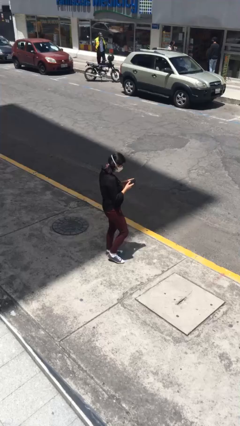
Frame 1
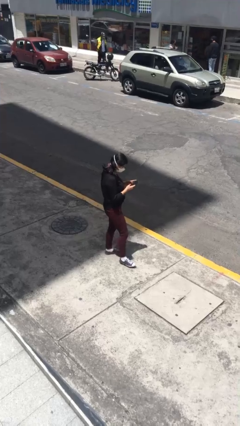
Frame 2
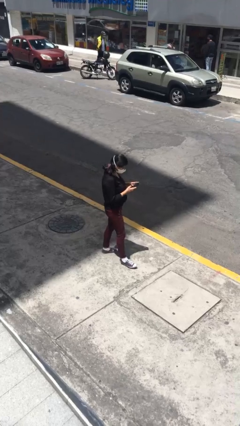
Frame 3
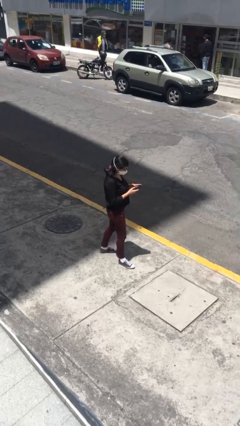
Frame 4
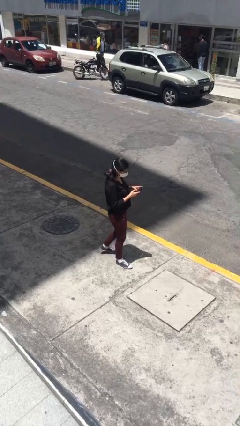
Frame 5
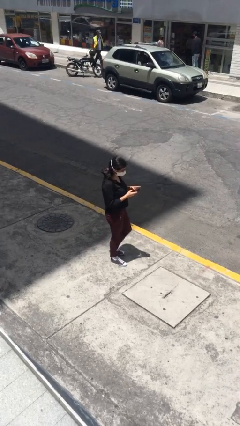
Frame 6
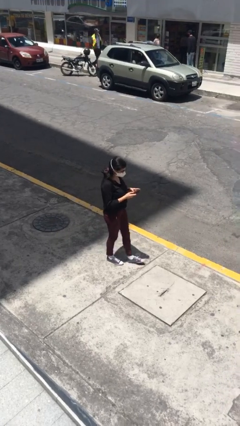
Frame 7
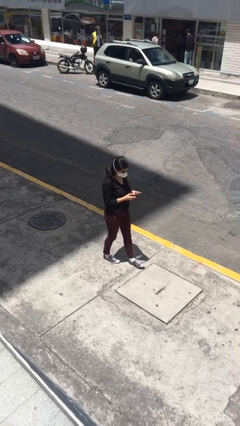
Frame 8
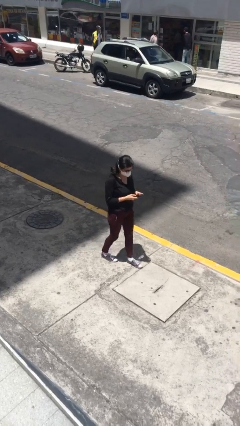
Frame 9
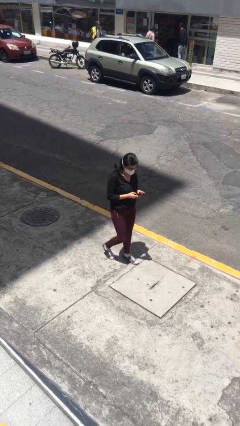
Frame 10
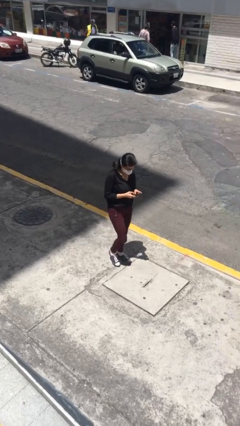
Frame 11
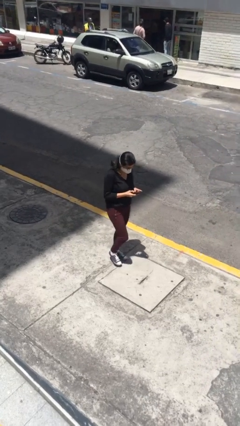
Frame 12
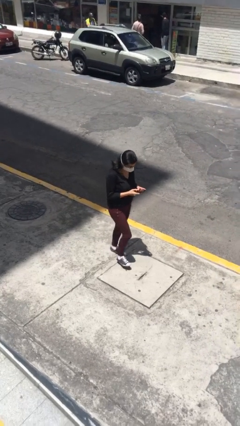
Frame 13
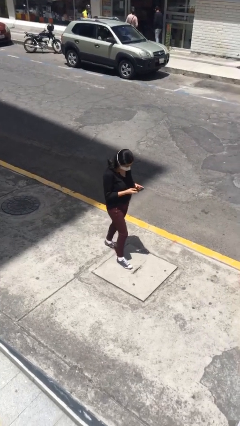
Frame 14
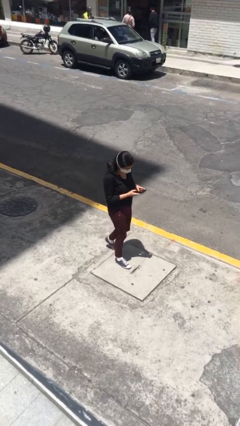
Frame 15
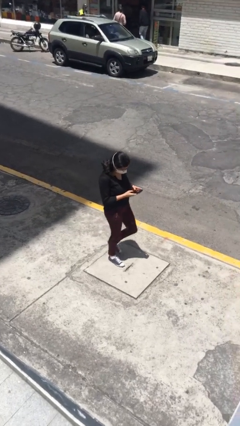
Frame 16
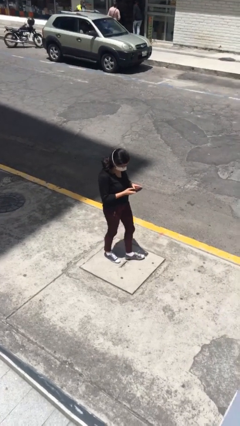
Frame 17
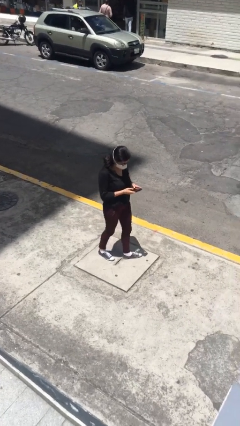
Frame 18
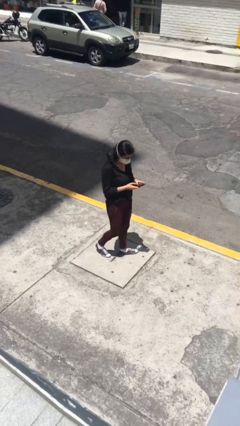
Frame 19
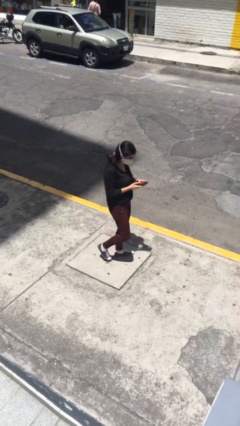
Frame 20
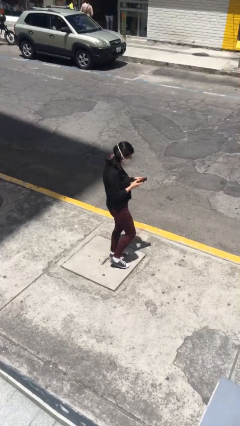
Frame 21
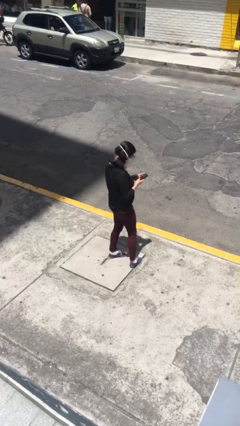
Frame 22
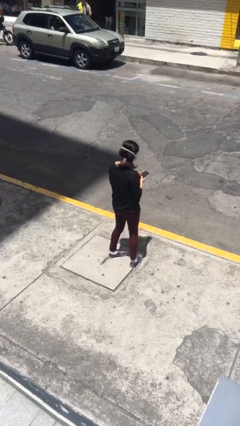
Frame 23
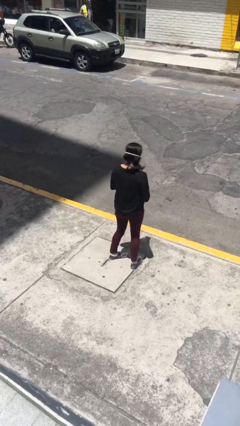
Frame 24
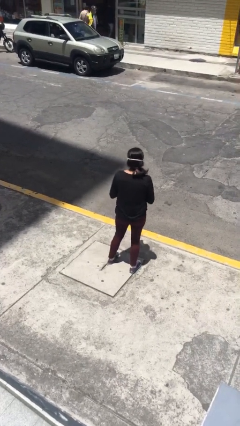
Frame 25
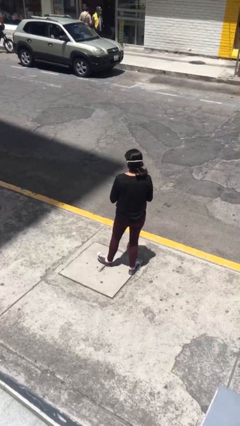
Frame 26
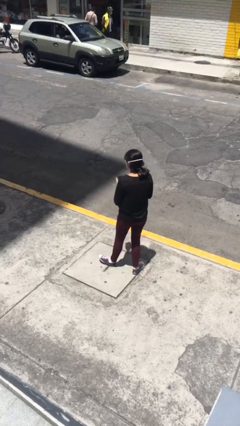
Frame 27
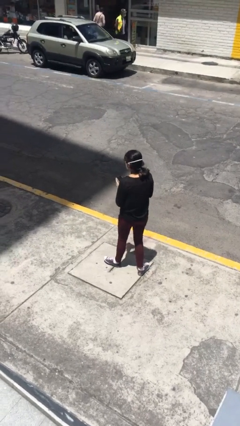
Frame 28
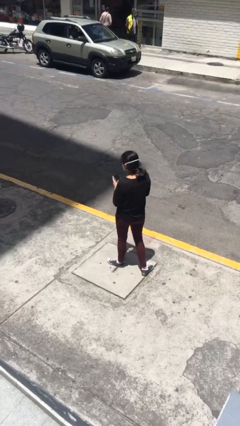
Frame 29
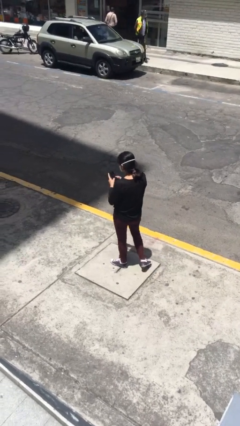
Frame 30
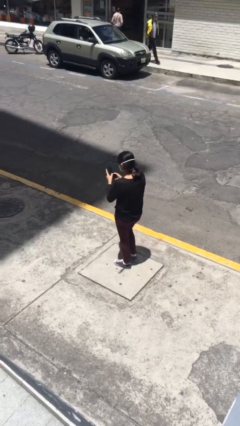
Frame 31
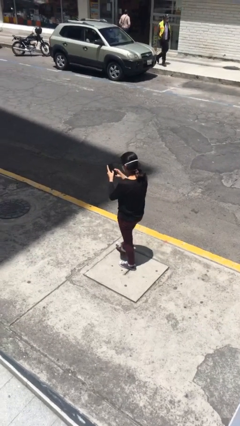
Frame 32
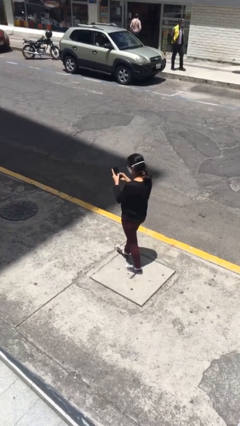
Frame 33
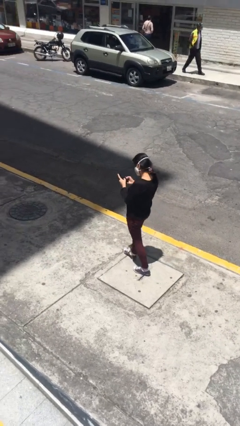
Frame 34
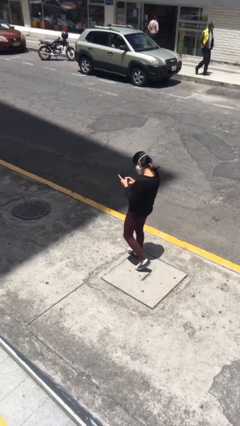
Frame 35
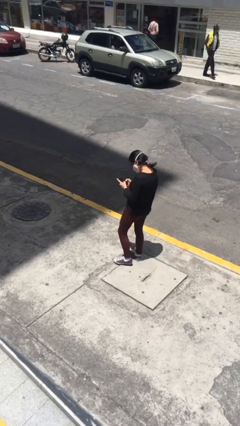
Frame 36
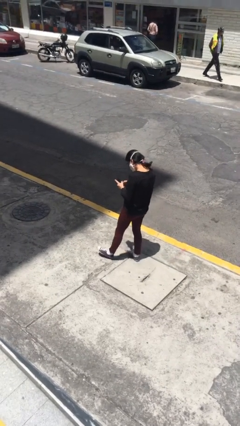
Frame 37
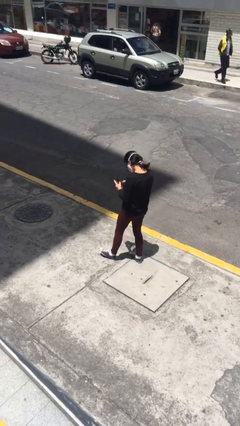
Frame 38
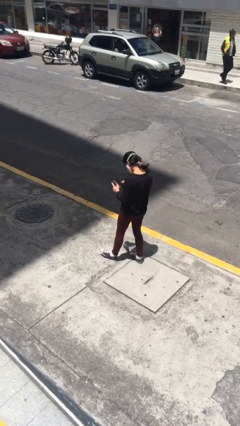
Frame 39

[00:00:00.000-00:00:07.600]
person texts on phone

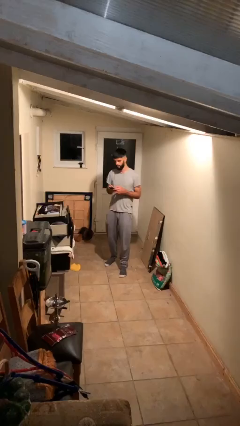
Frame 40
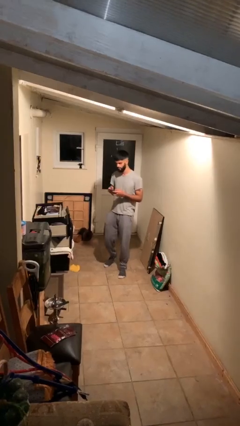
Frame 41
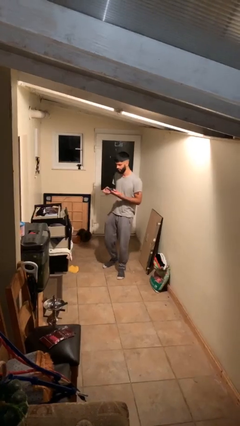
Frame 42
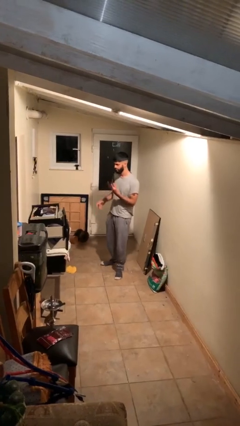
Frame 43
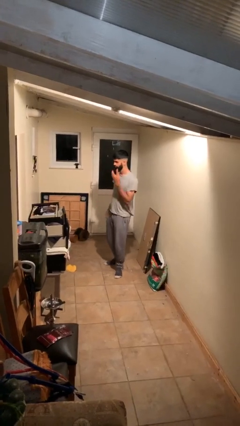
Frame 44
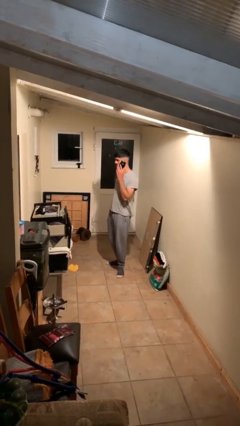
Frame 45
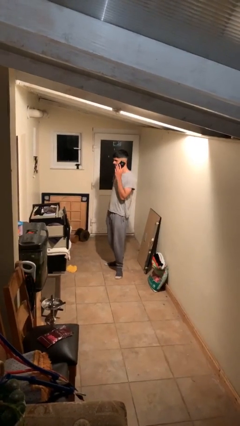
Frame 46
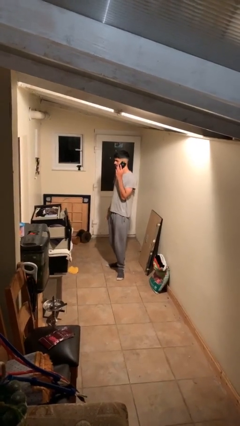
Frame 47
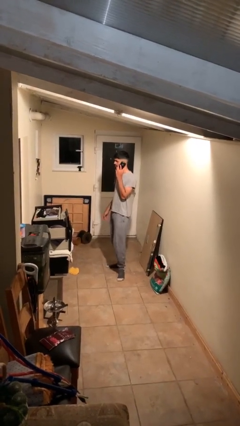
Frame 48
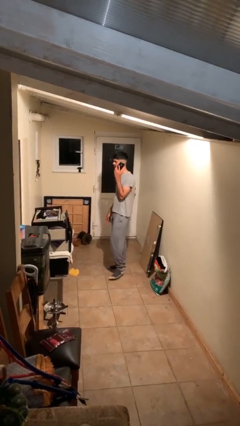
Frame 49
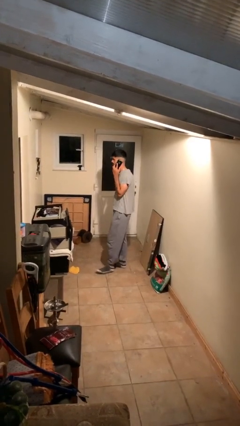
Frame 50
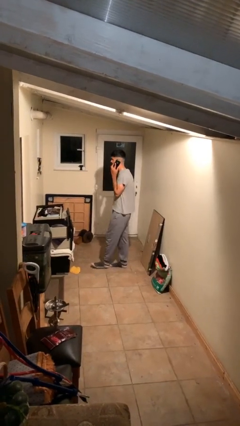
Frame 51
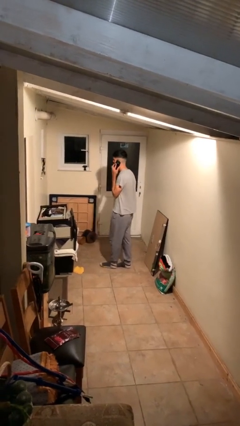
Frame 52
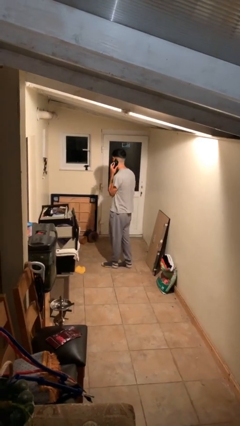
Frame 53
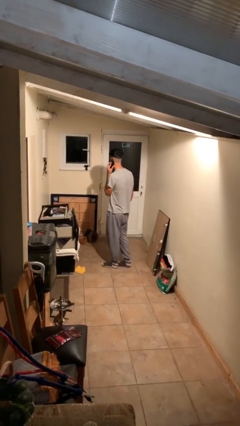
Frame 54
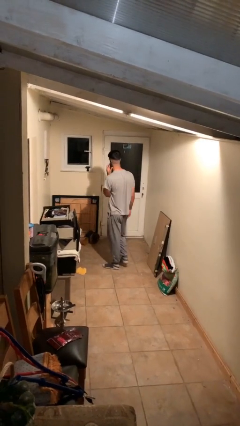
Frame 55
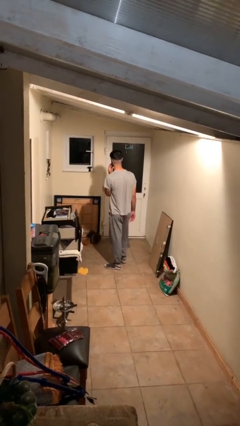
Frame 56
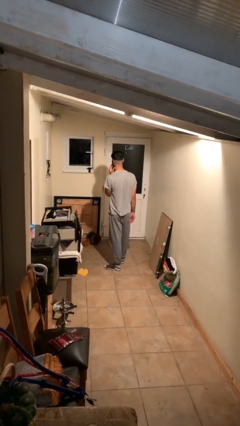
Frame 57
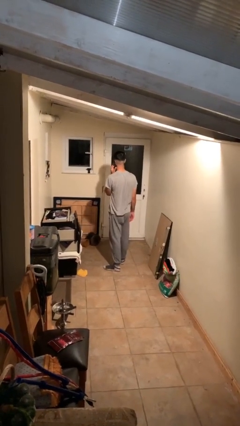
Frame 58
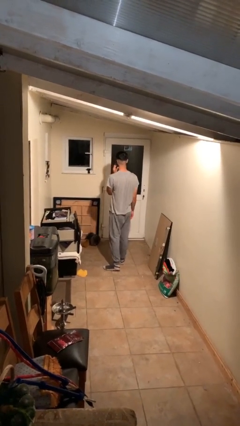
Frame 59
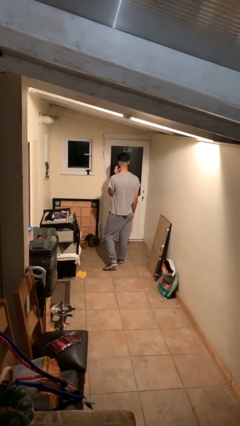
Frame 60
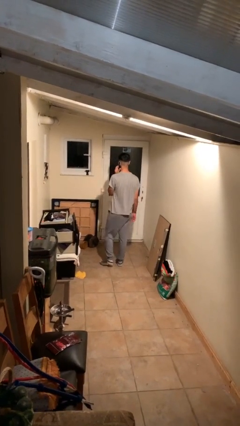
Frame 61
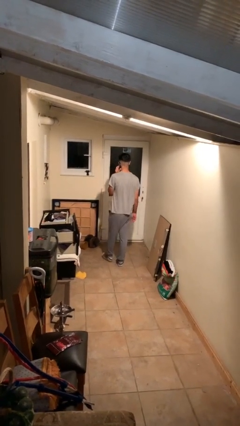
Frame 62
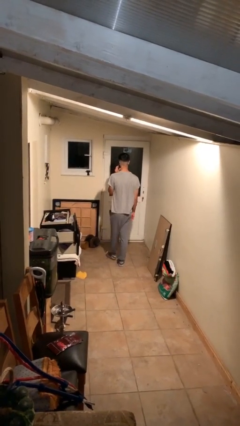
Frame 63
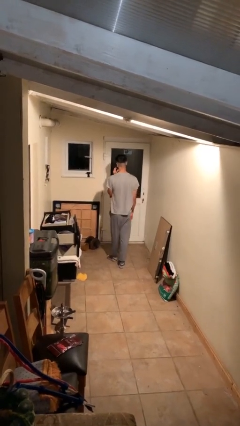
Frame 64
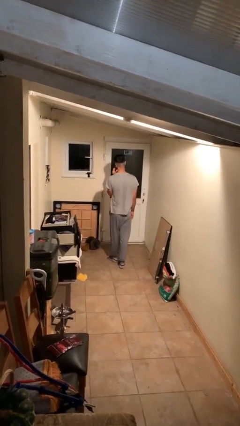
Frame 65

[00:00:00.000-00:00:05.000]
person talks on phone

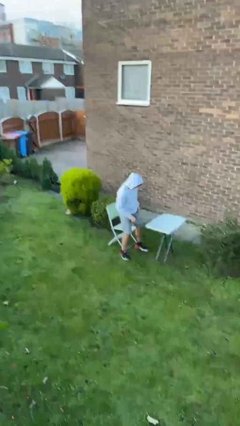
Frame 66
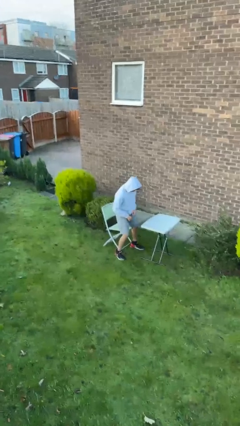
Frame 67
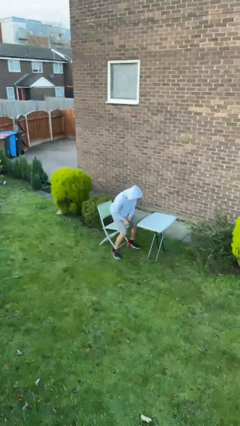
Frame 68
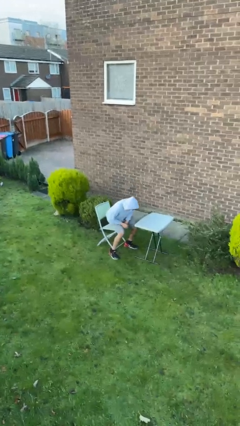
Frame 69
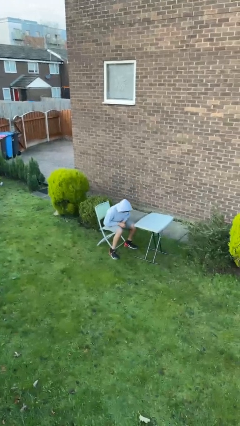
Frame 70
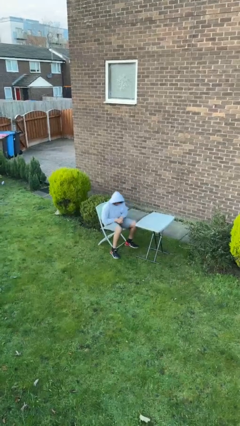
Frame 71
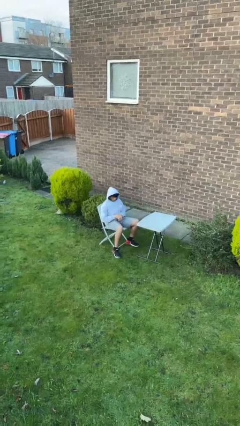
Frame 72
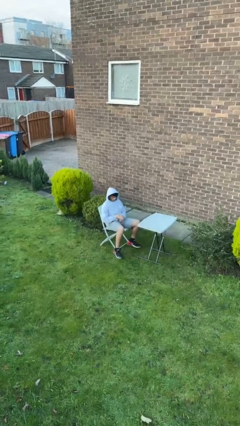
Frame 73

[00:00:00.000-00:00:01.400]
person sits down

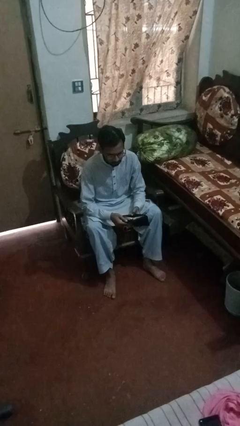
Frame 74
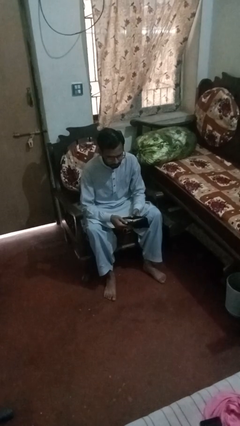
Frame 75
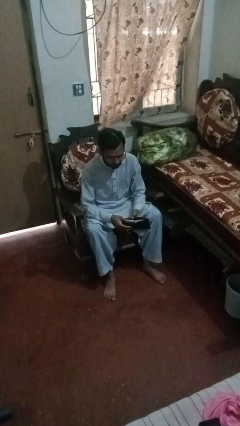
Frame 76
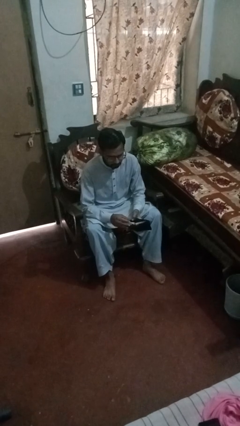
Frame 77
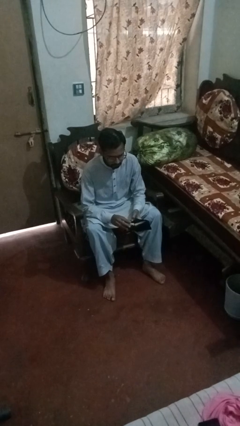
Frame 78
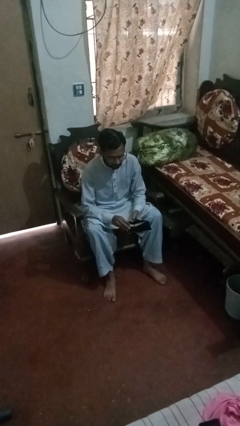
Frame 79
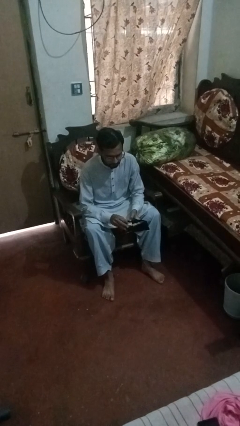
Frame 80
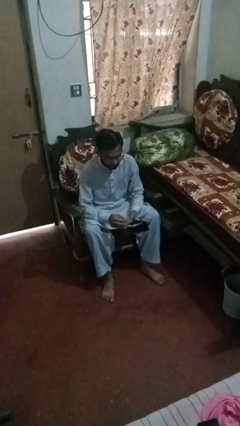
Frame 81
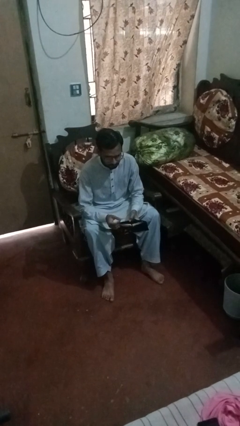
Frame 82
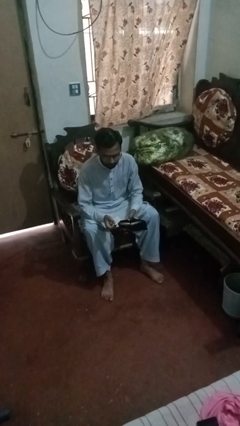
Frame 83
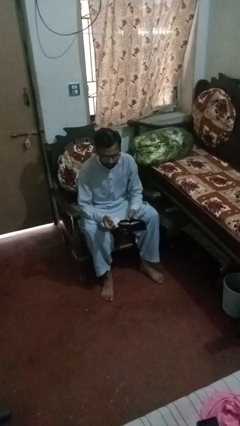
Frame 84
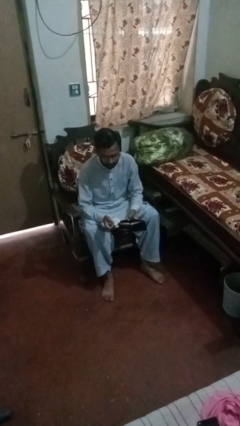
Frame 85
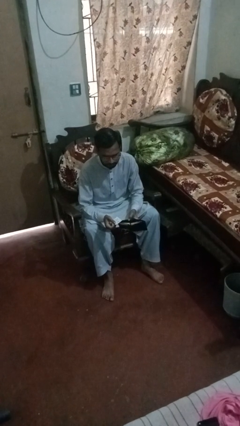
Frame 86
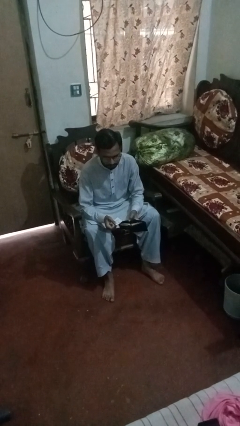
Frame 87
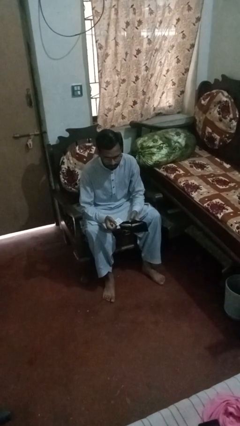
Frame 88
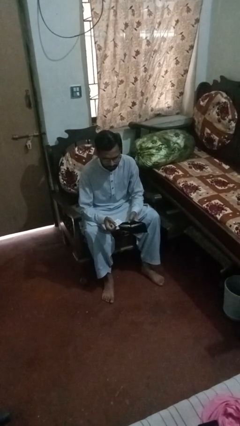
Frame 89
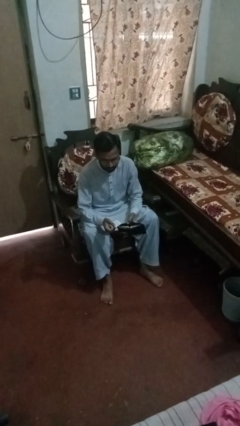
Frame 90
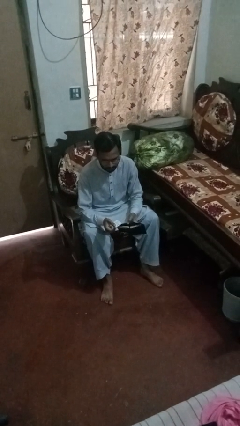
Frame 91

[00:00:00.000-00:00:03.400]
person takes object from purse

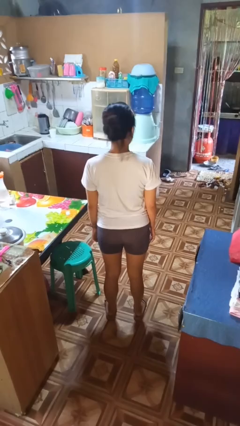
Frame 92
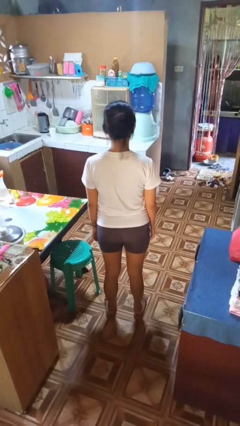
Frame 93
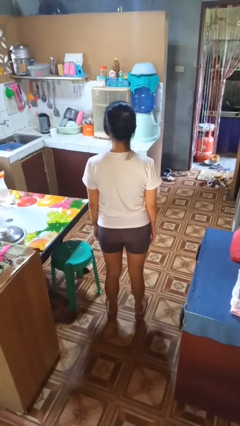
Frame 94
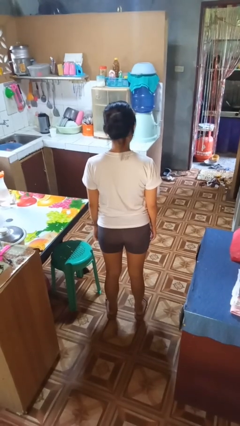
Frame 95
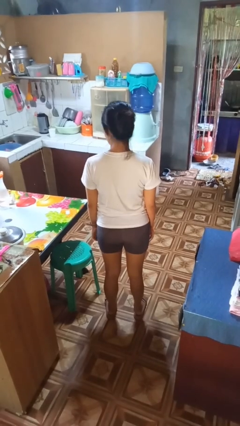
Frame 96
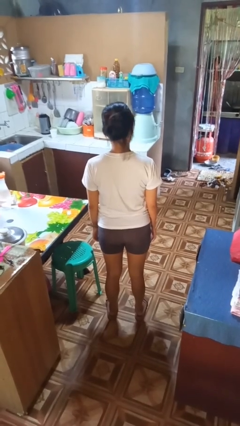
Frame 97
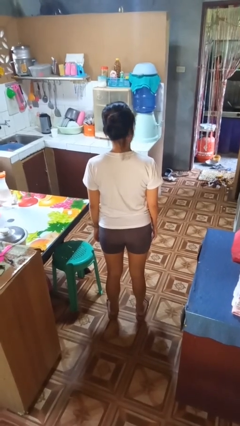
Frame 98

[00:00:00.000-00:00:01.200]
person shakes head
